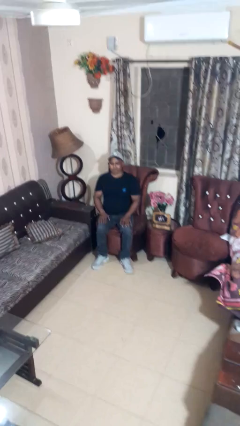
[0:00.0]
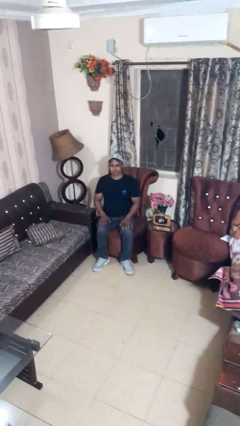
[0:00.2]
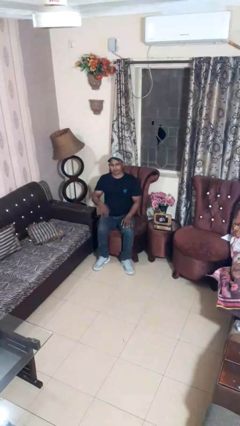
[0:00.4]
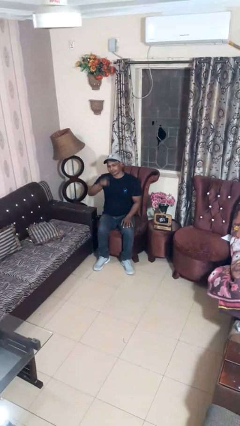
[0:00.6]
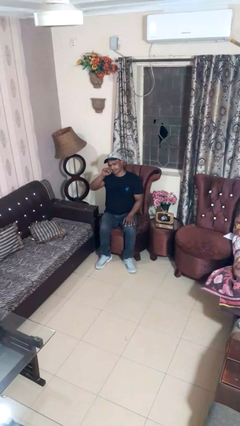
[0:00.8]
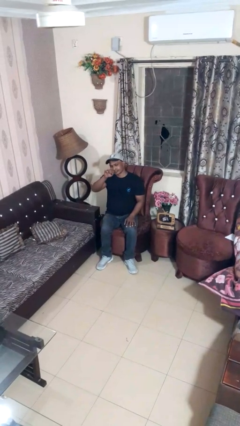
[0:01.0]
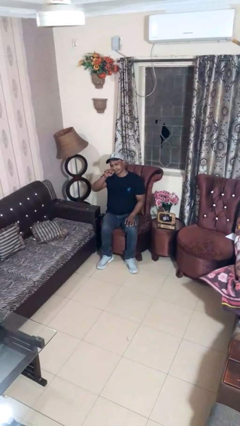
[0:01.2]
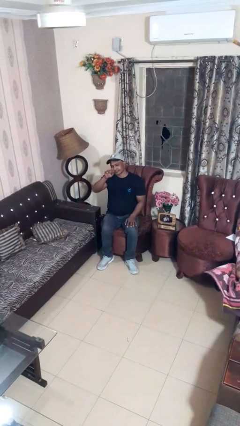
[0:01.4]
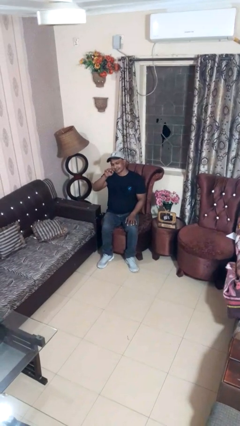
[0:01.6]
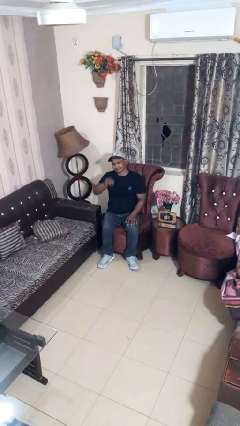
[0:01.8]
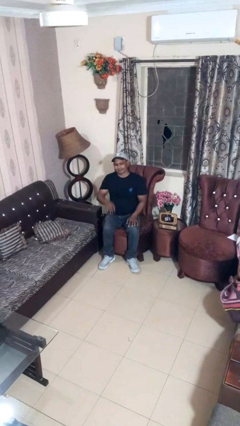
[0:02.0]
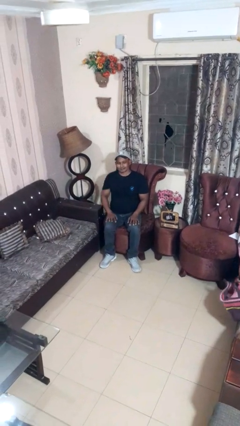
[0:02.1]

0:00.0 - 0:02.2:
person gestures come here

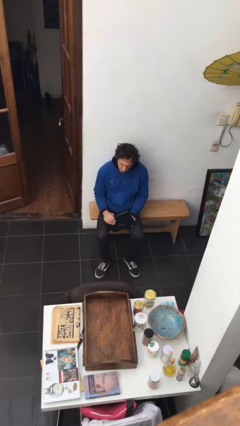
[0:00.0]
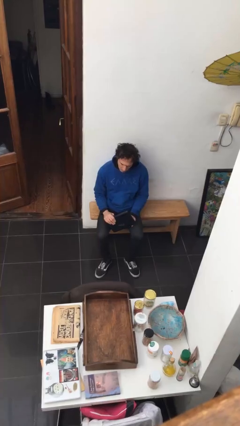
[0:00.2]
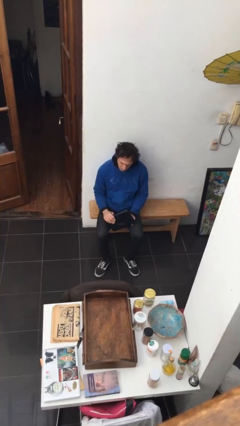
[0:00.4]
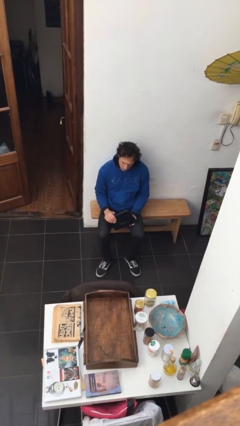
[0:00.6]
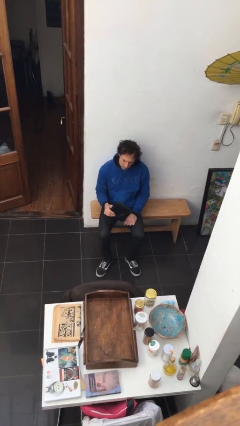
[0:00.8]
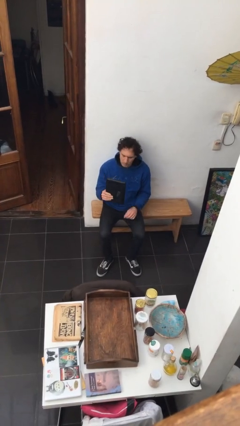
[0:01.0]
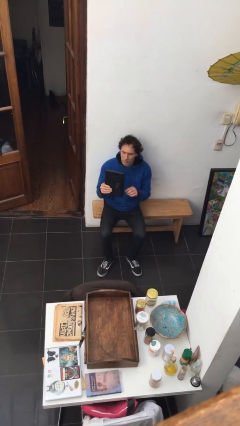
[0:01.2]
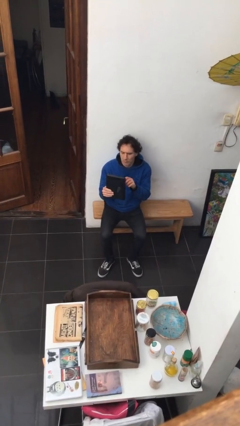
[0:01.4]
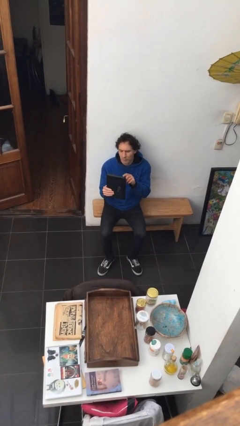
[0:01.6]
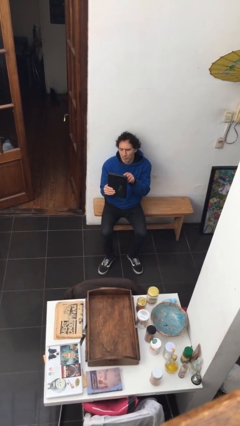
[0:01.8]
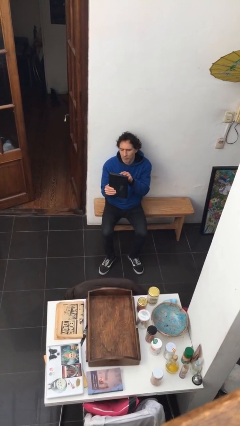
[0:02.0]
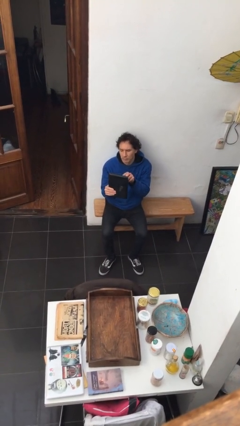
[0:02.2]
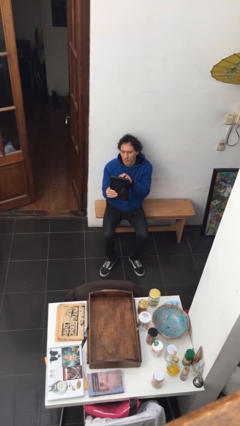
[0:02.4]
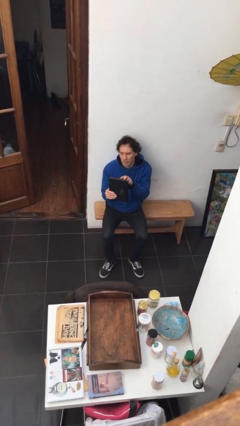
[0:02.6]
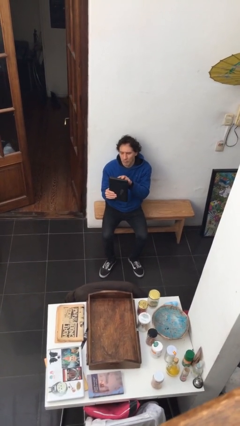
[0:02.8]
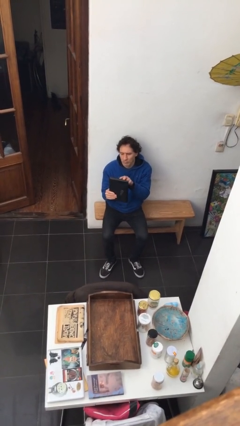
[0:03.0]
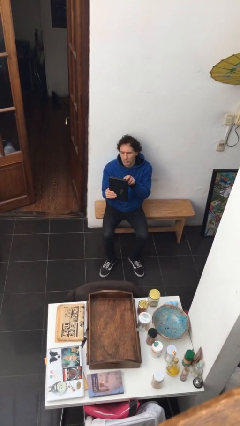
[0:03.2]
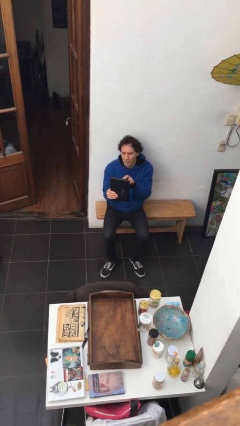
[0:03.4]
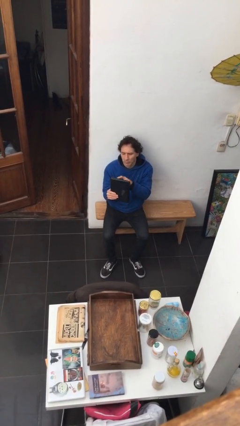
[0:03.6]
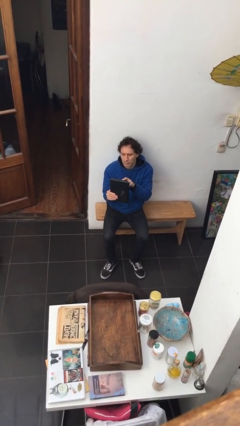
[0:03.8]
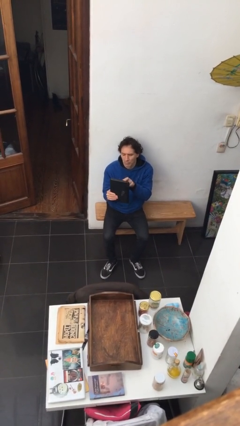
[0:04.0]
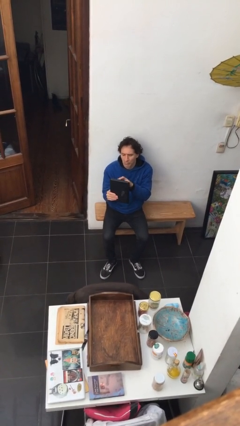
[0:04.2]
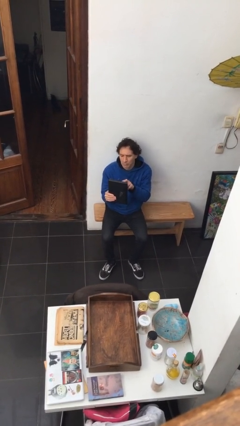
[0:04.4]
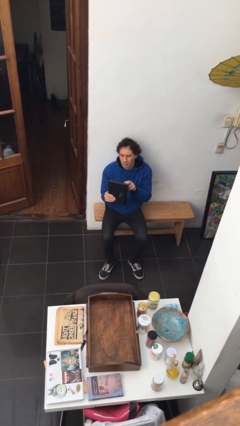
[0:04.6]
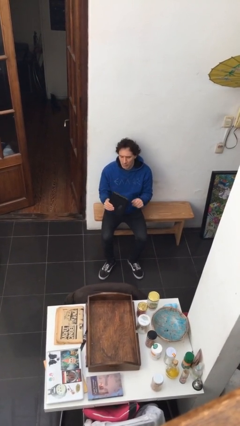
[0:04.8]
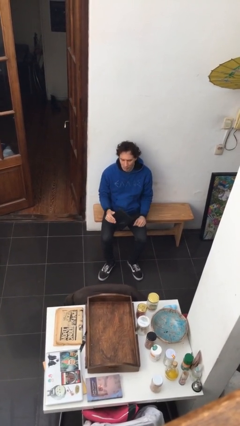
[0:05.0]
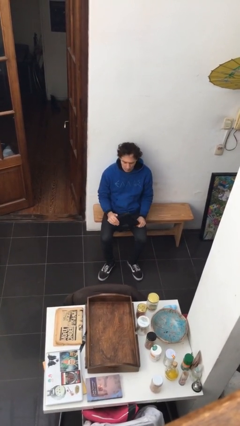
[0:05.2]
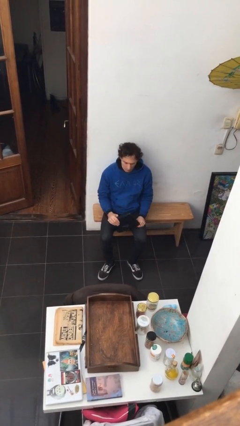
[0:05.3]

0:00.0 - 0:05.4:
person interacts with tablet

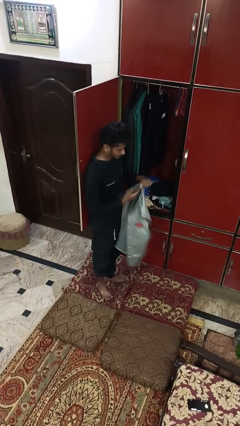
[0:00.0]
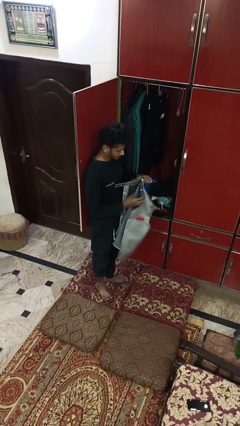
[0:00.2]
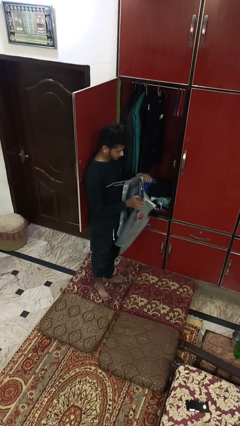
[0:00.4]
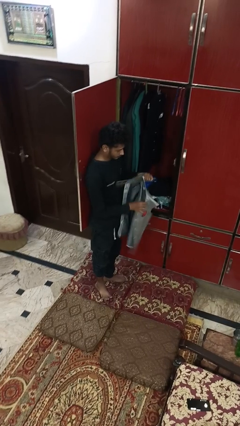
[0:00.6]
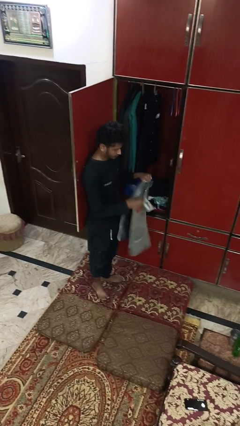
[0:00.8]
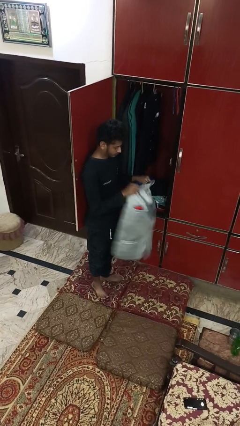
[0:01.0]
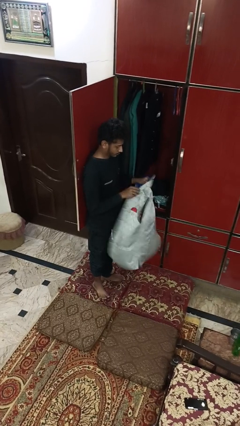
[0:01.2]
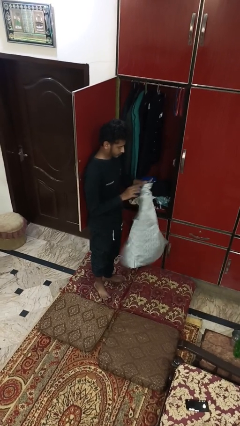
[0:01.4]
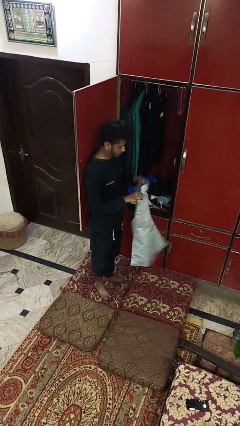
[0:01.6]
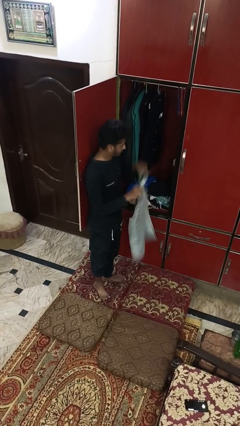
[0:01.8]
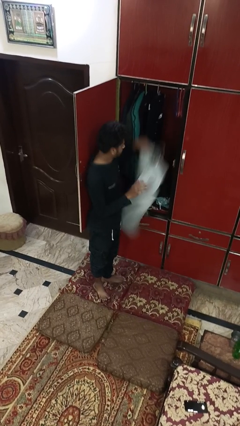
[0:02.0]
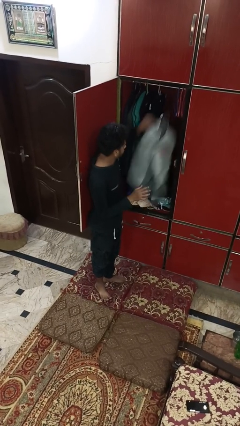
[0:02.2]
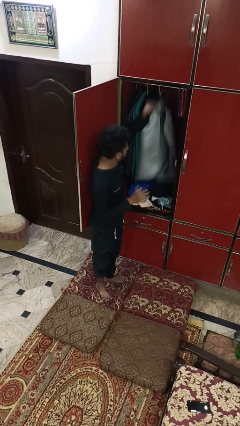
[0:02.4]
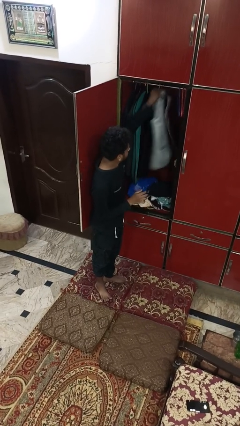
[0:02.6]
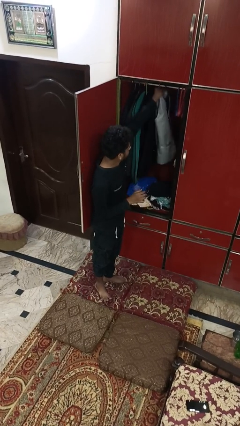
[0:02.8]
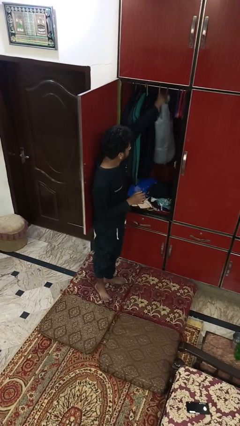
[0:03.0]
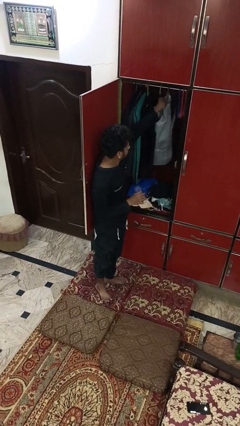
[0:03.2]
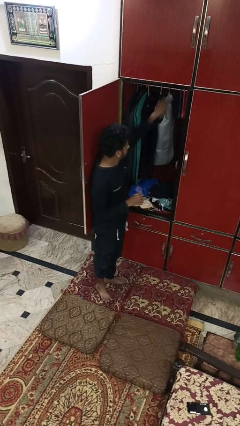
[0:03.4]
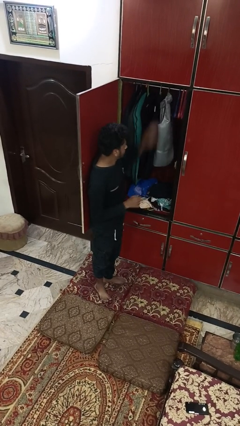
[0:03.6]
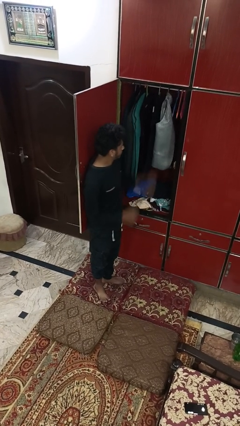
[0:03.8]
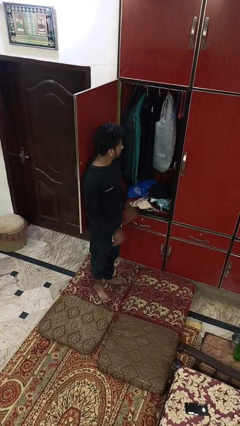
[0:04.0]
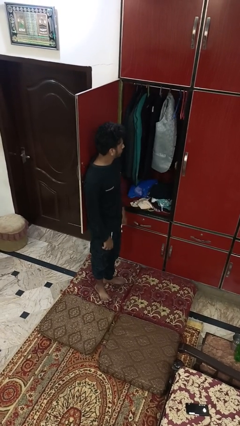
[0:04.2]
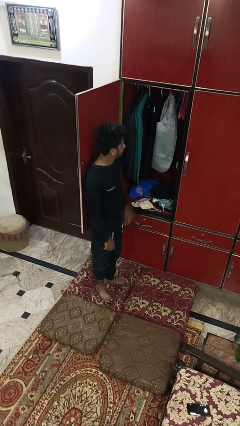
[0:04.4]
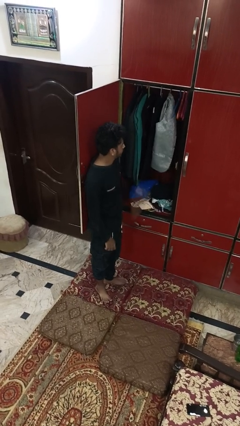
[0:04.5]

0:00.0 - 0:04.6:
person puts clothes into closet

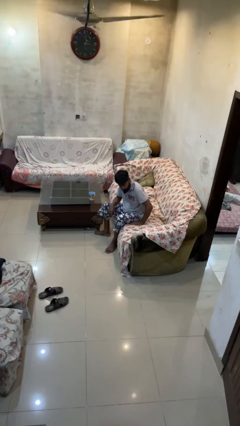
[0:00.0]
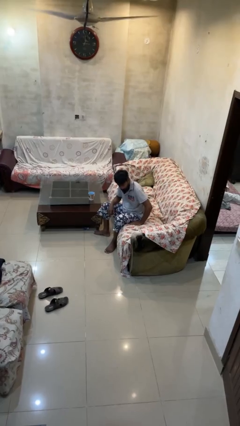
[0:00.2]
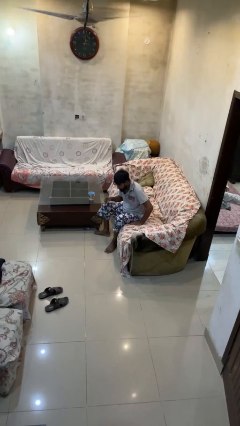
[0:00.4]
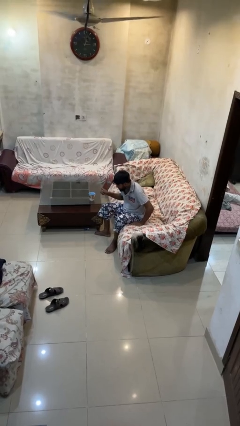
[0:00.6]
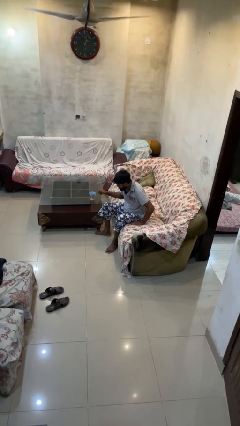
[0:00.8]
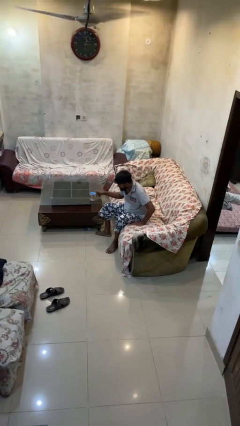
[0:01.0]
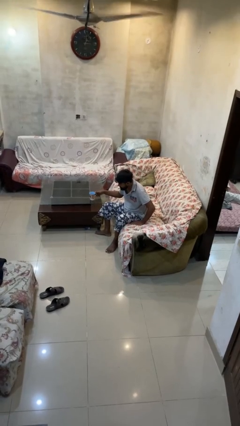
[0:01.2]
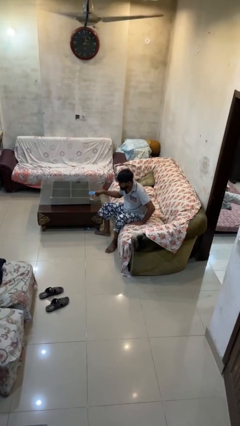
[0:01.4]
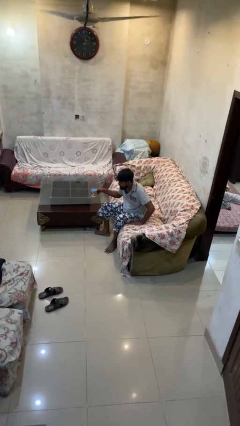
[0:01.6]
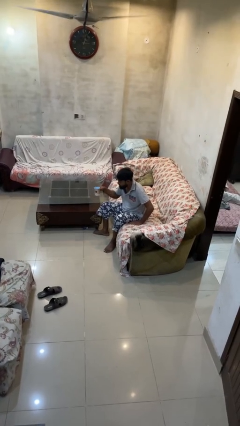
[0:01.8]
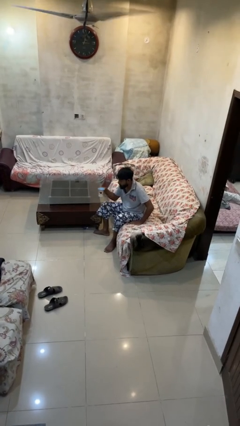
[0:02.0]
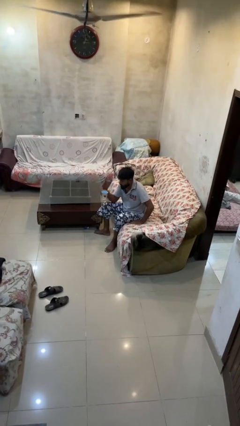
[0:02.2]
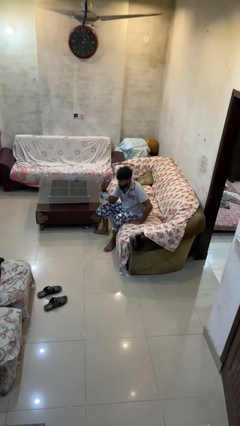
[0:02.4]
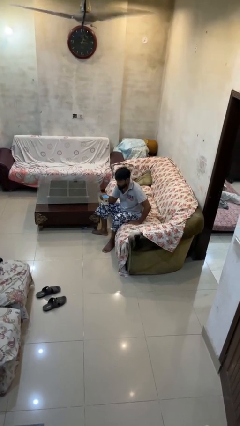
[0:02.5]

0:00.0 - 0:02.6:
person picks up object from table

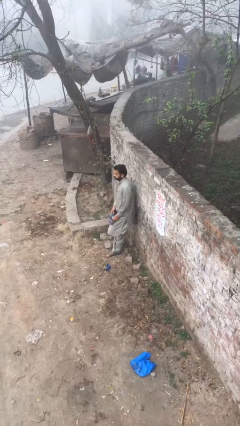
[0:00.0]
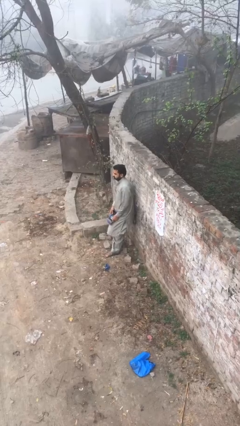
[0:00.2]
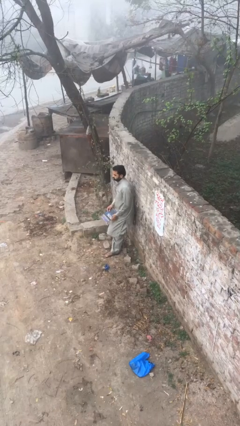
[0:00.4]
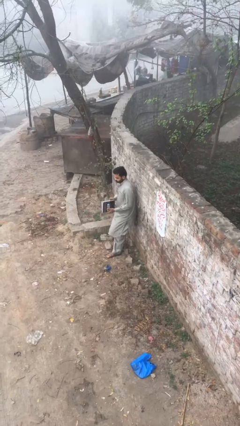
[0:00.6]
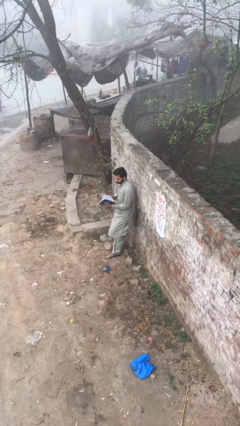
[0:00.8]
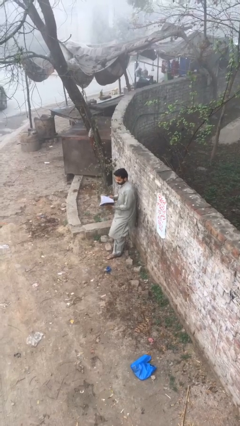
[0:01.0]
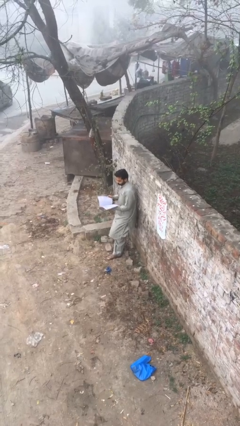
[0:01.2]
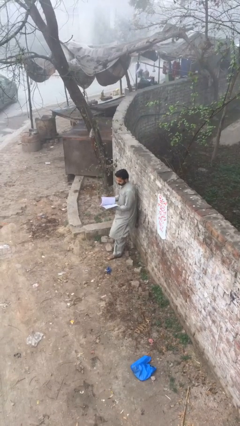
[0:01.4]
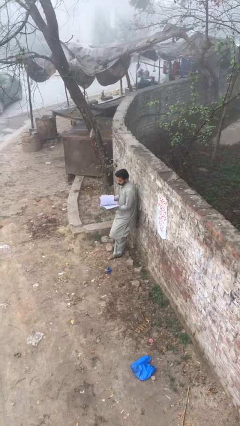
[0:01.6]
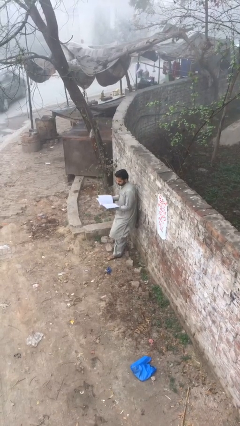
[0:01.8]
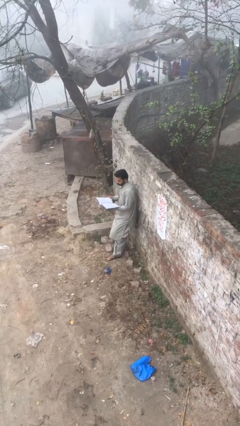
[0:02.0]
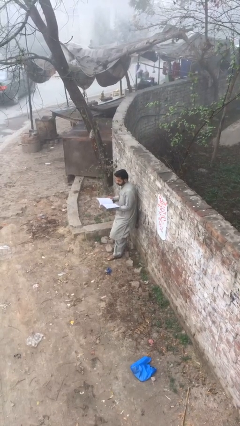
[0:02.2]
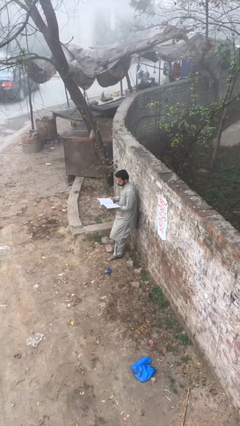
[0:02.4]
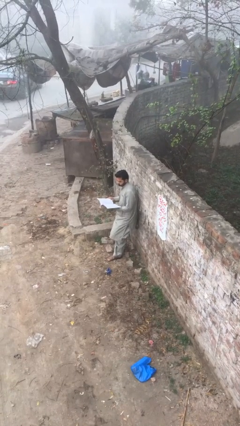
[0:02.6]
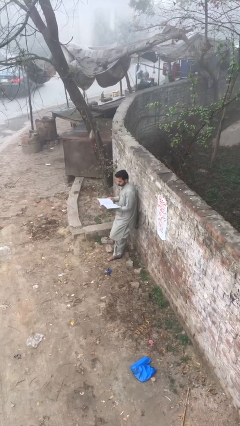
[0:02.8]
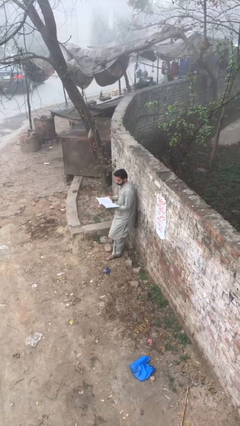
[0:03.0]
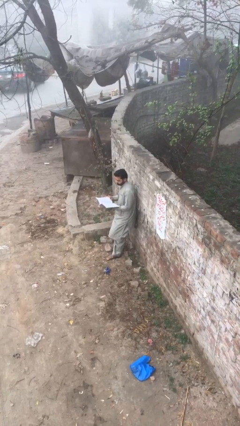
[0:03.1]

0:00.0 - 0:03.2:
person reads document
